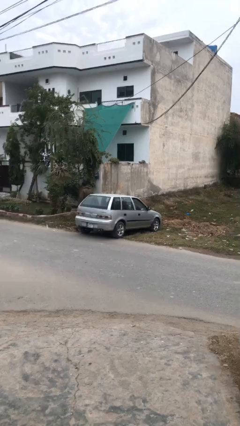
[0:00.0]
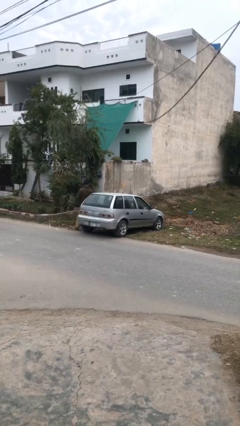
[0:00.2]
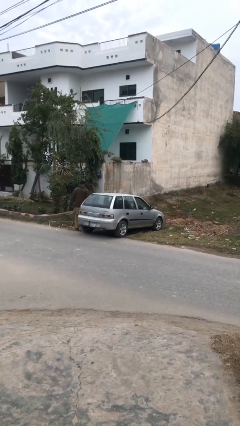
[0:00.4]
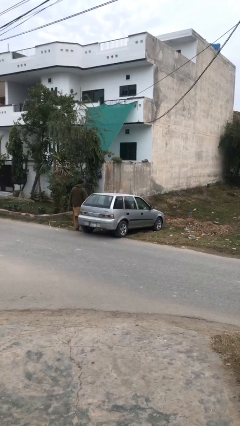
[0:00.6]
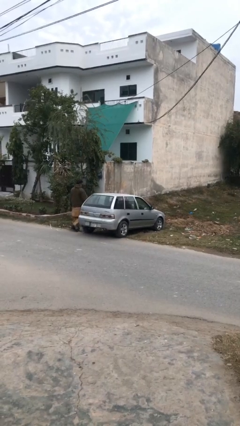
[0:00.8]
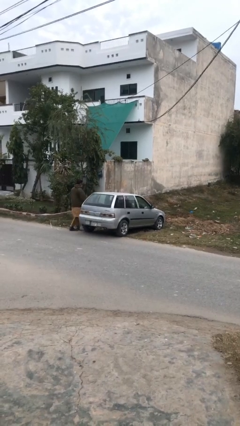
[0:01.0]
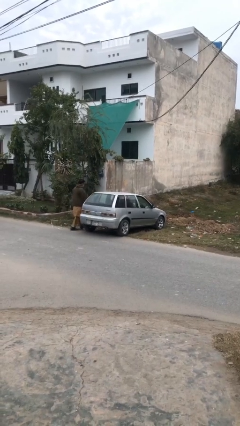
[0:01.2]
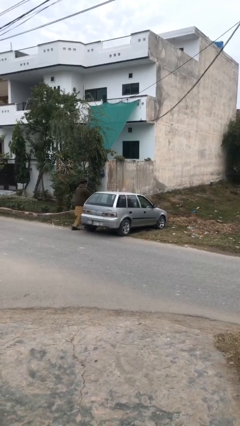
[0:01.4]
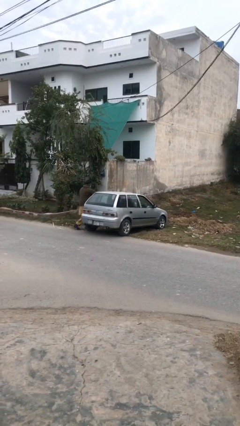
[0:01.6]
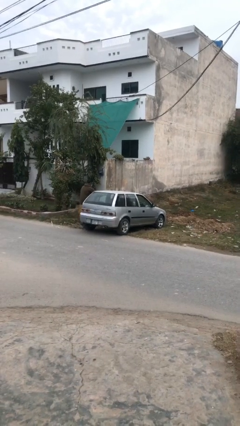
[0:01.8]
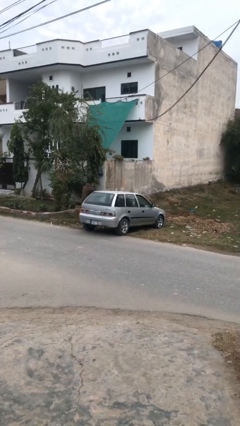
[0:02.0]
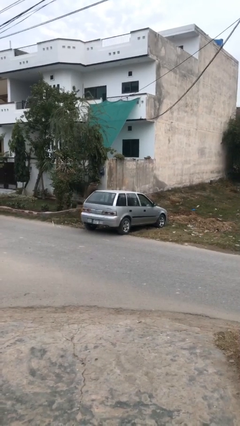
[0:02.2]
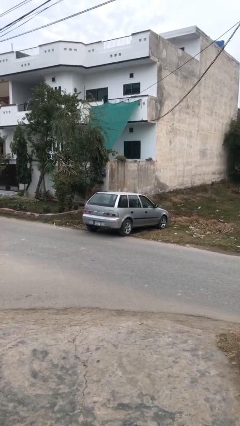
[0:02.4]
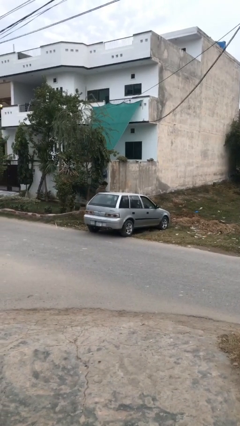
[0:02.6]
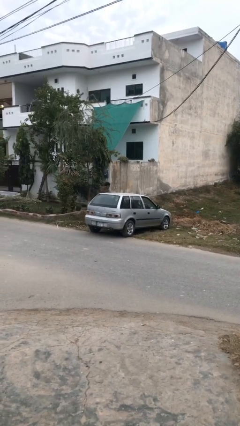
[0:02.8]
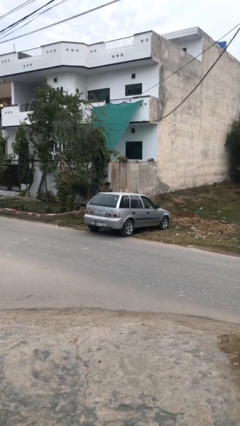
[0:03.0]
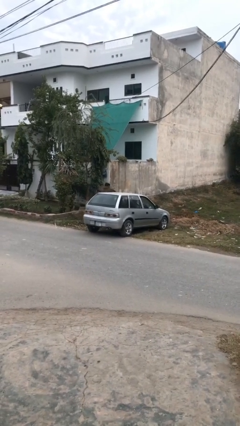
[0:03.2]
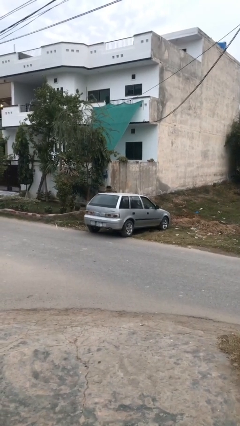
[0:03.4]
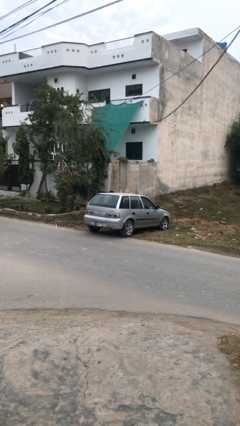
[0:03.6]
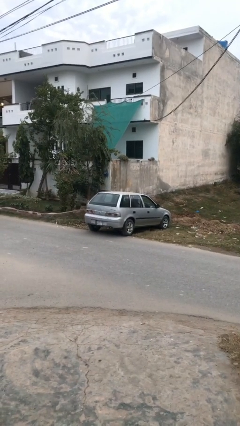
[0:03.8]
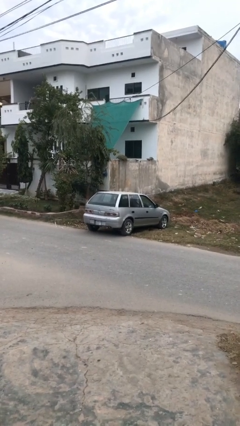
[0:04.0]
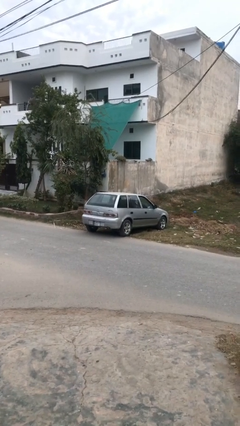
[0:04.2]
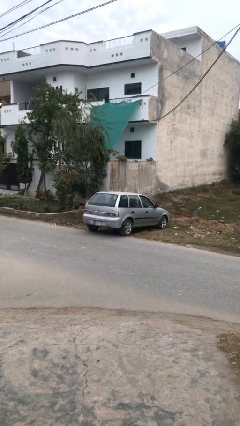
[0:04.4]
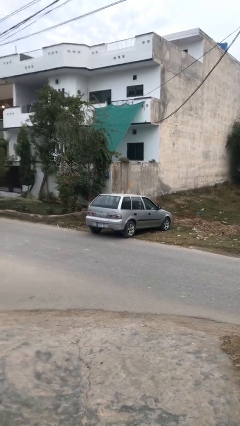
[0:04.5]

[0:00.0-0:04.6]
car picks up person

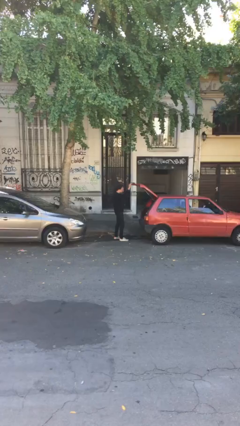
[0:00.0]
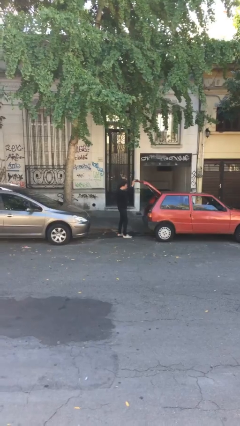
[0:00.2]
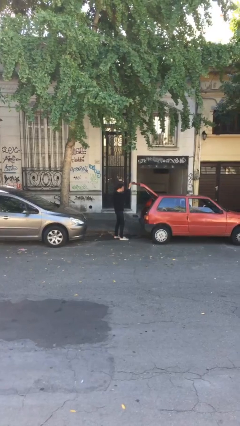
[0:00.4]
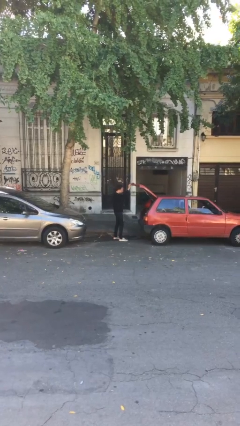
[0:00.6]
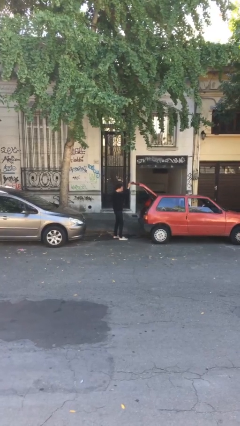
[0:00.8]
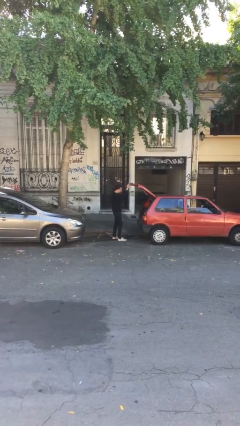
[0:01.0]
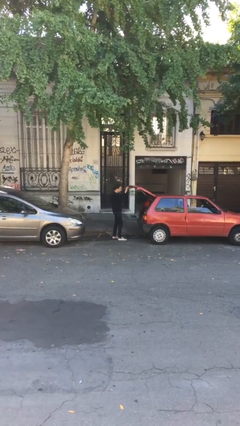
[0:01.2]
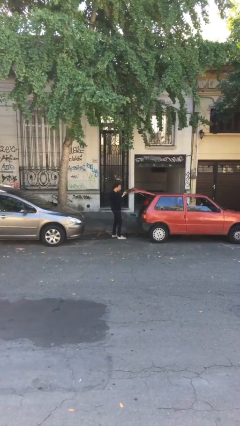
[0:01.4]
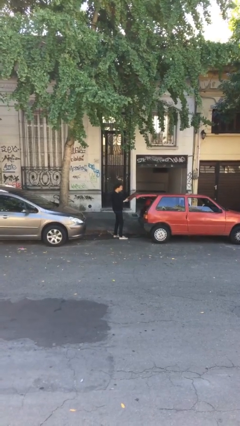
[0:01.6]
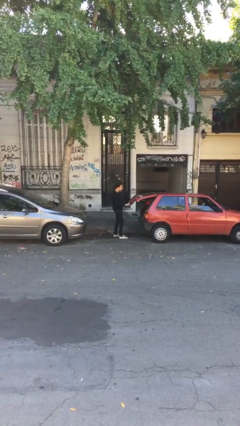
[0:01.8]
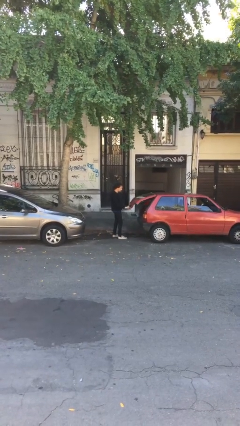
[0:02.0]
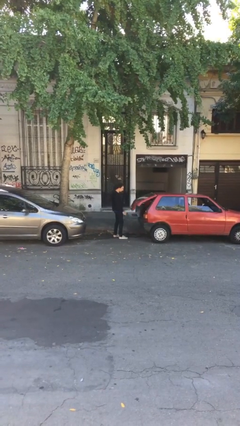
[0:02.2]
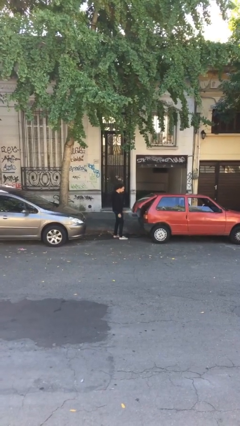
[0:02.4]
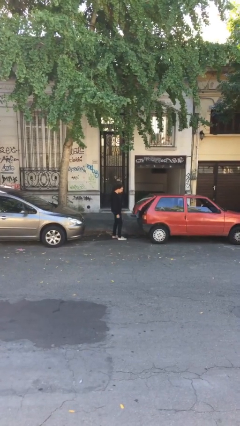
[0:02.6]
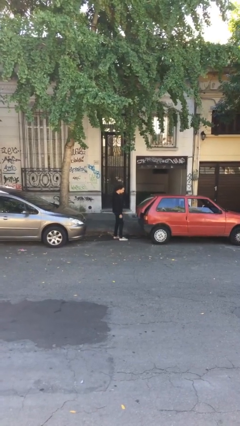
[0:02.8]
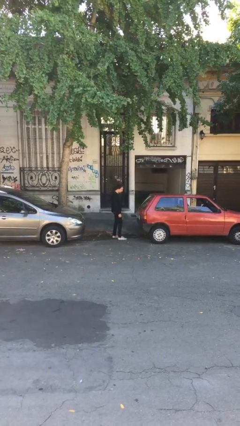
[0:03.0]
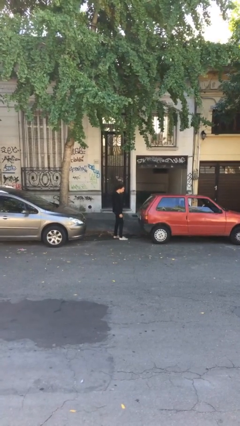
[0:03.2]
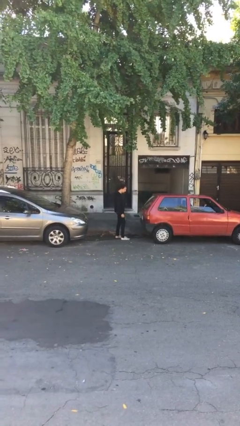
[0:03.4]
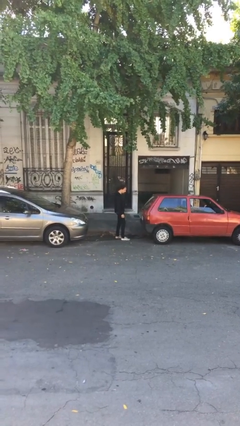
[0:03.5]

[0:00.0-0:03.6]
person closes car trunk

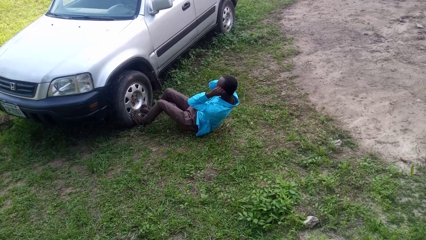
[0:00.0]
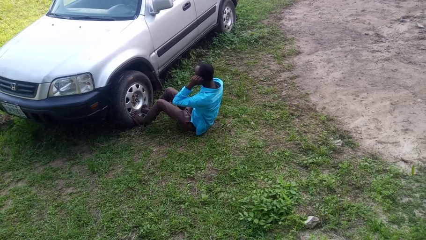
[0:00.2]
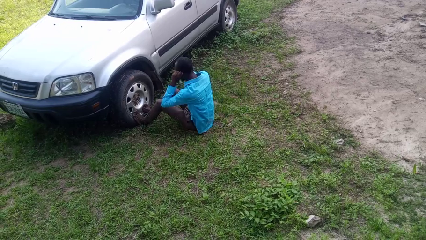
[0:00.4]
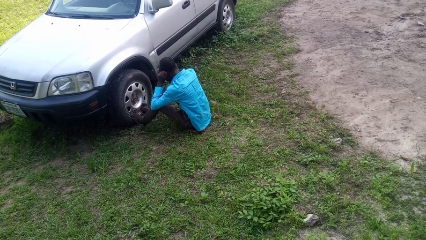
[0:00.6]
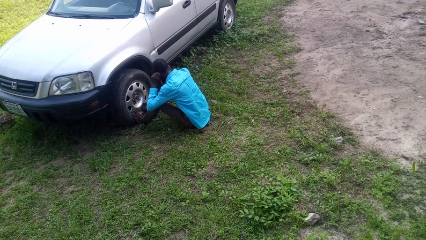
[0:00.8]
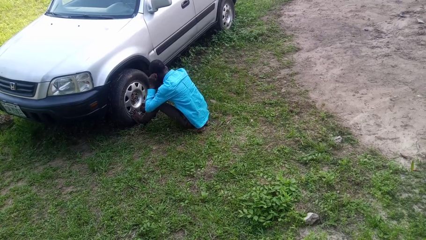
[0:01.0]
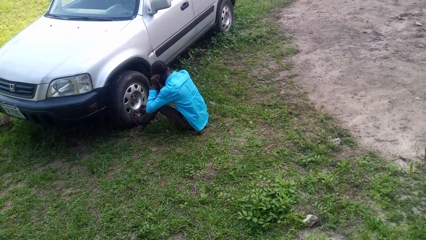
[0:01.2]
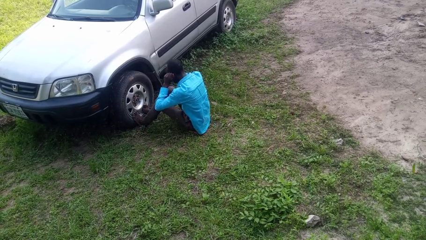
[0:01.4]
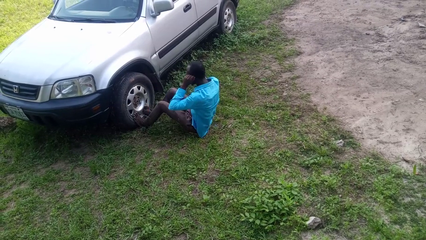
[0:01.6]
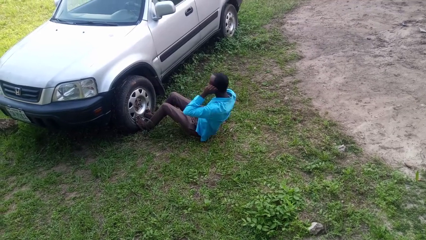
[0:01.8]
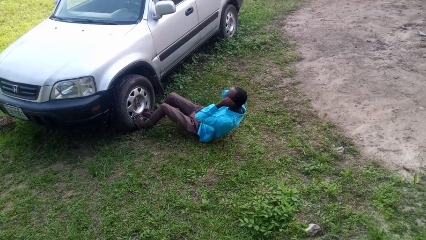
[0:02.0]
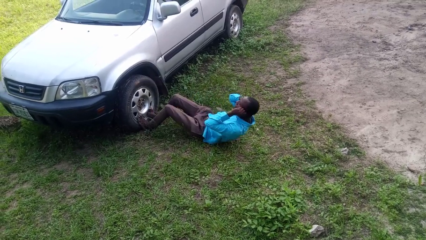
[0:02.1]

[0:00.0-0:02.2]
person exercises with situp

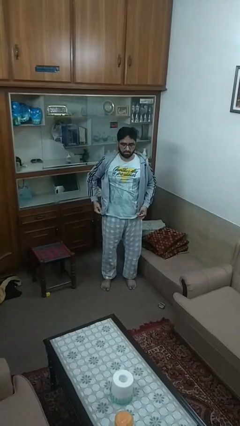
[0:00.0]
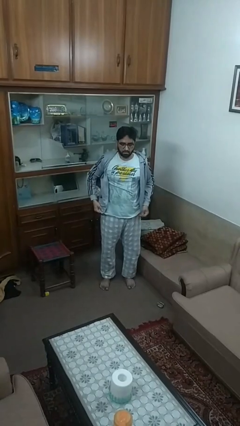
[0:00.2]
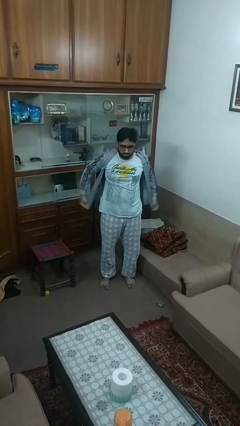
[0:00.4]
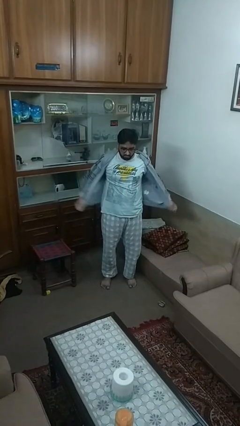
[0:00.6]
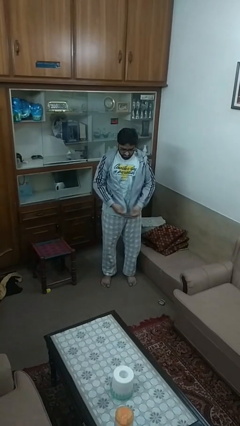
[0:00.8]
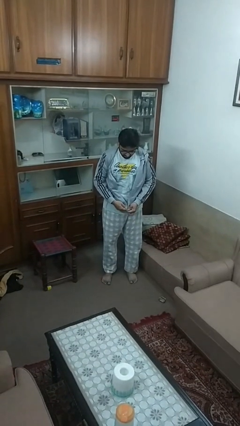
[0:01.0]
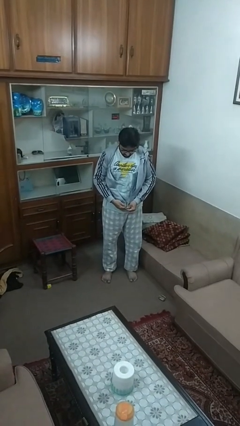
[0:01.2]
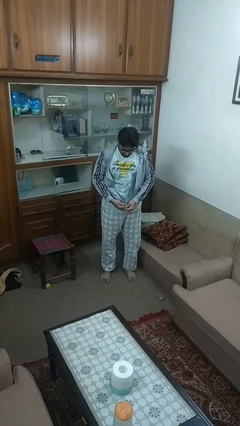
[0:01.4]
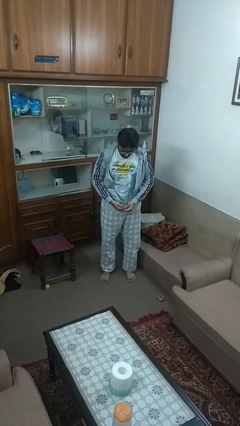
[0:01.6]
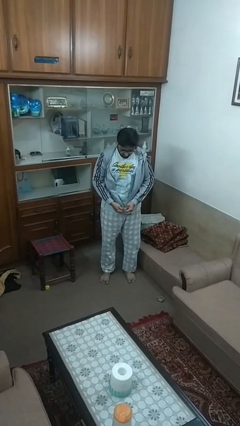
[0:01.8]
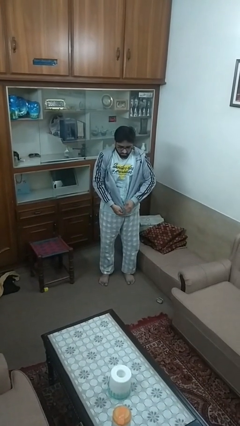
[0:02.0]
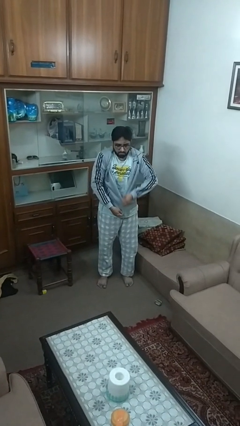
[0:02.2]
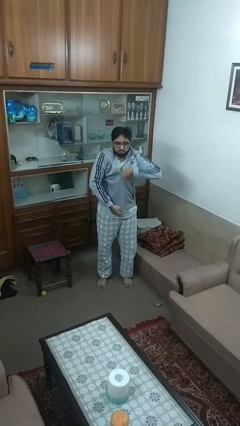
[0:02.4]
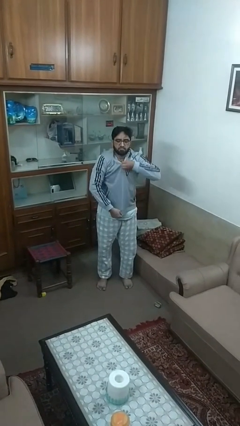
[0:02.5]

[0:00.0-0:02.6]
person zips up jacket

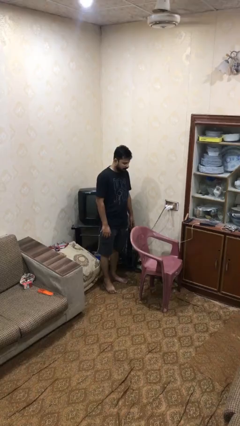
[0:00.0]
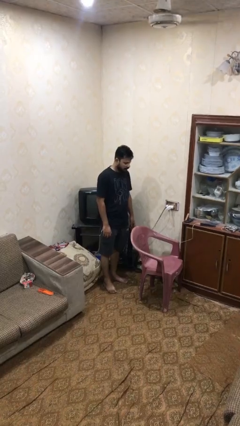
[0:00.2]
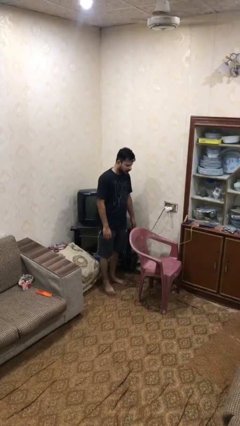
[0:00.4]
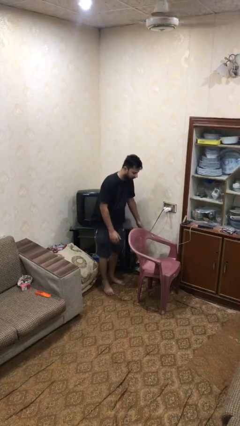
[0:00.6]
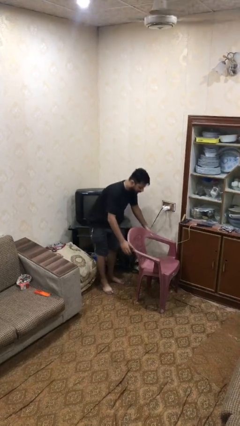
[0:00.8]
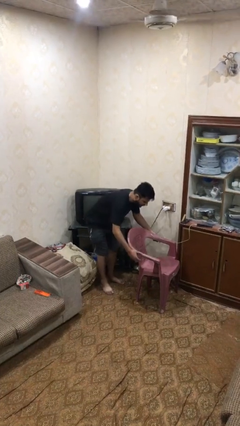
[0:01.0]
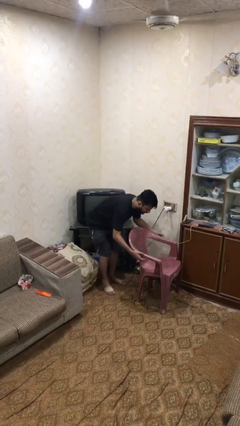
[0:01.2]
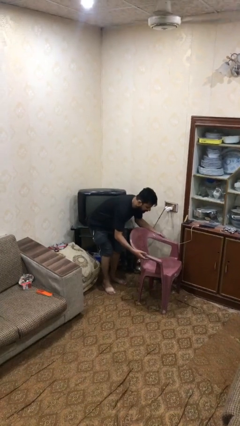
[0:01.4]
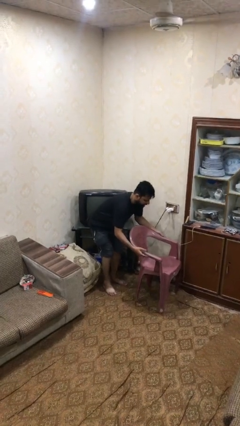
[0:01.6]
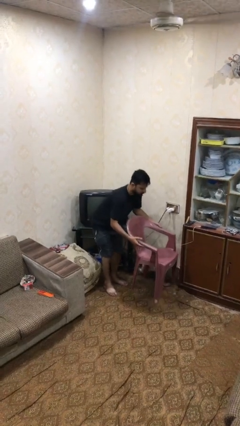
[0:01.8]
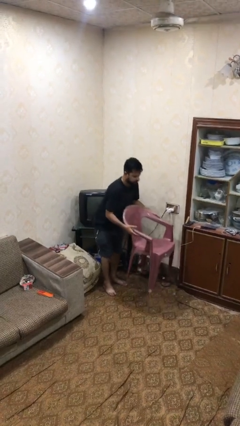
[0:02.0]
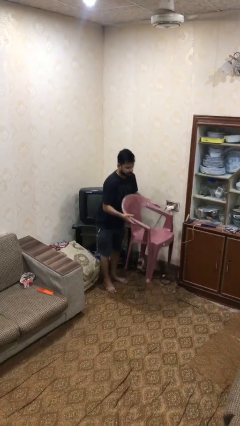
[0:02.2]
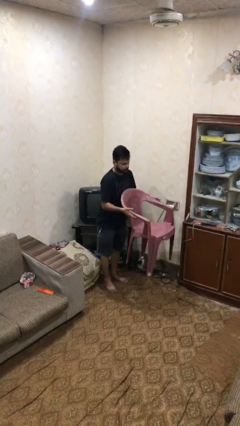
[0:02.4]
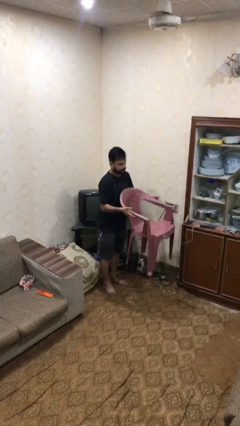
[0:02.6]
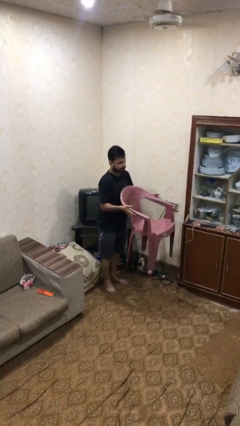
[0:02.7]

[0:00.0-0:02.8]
person picks up object from floor

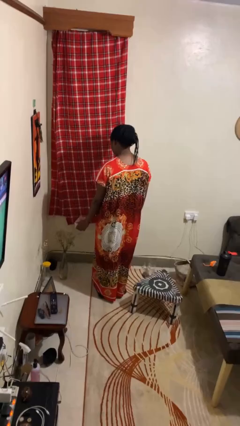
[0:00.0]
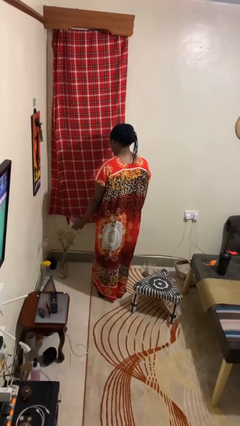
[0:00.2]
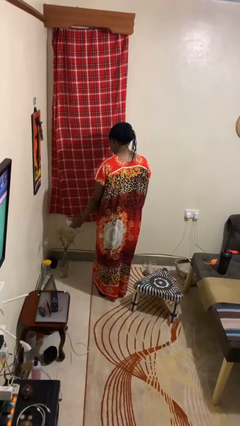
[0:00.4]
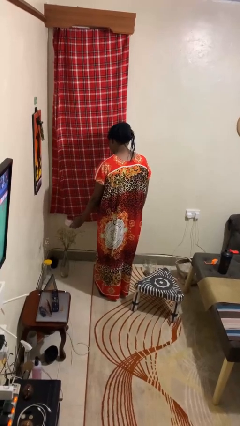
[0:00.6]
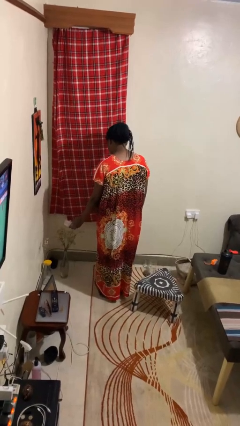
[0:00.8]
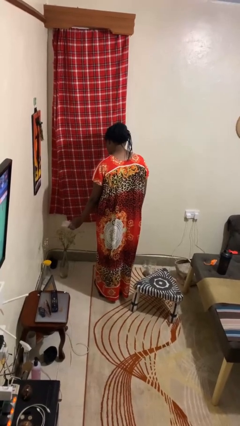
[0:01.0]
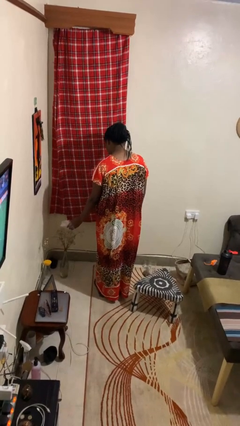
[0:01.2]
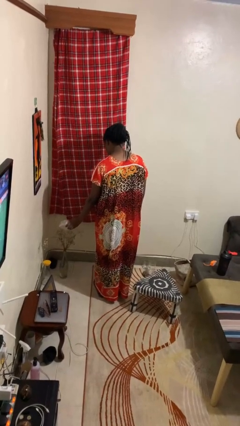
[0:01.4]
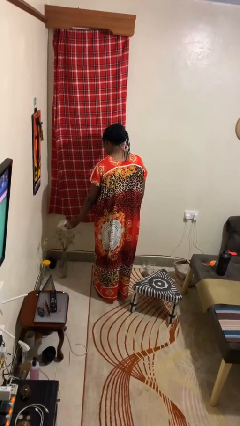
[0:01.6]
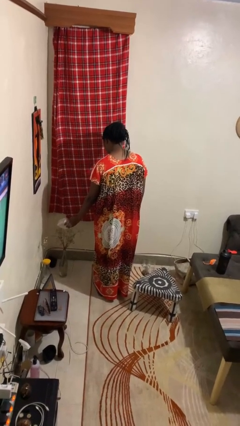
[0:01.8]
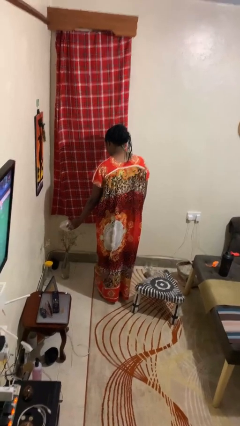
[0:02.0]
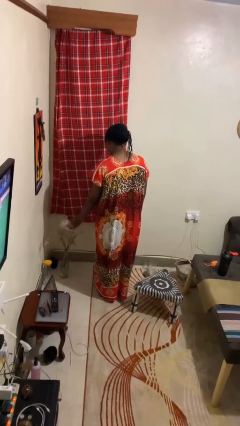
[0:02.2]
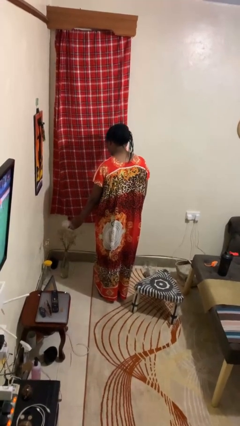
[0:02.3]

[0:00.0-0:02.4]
person waters houseplant
